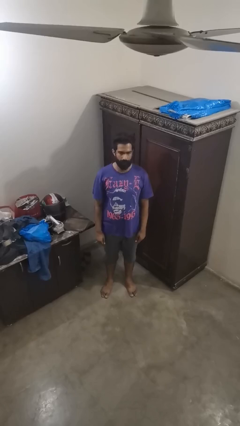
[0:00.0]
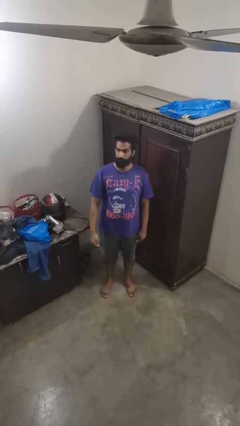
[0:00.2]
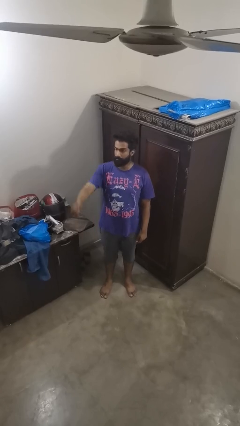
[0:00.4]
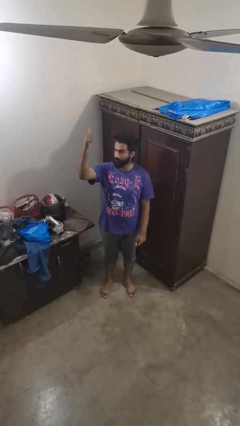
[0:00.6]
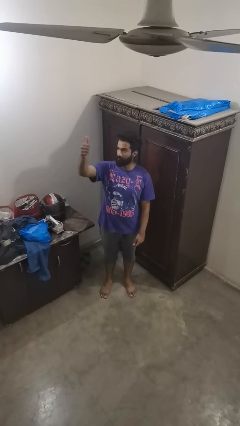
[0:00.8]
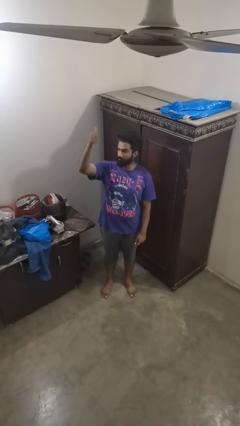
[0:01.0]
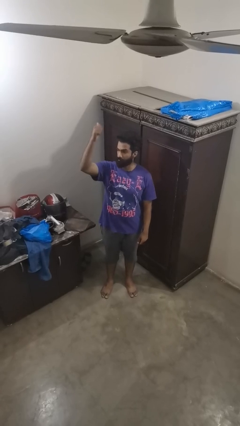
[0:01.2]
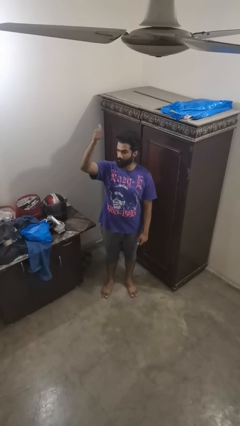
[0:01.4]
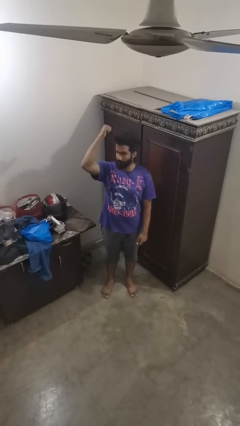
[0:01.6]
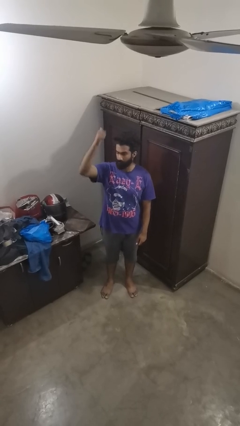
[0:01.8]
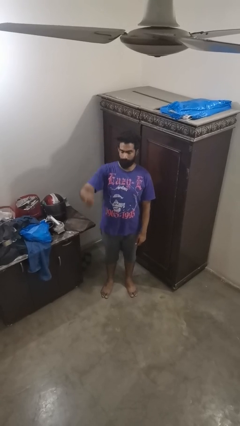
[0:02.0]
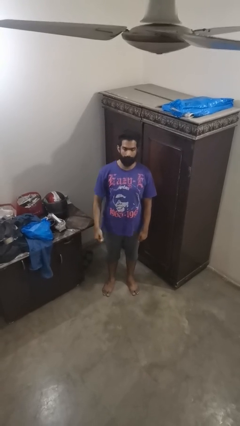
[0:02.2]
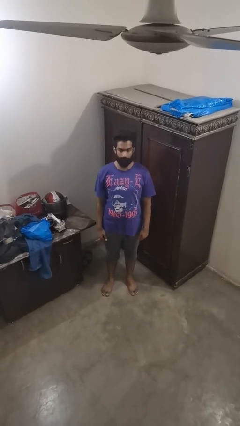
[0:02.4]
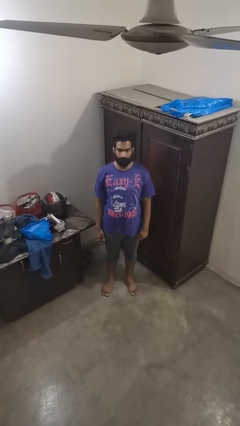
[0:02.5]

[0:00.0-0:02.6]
person gestures behind me

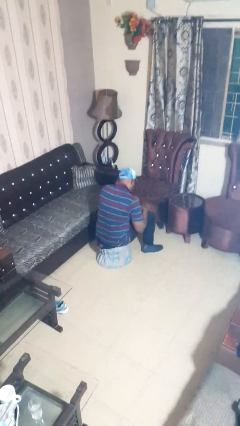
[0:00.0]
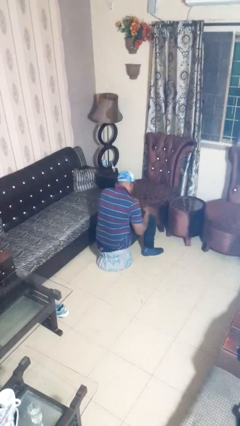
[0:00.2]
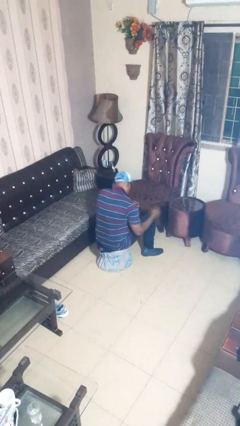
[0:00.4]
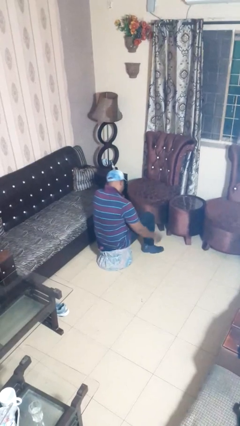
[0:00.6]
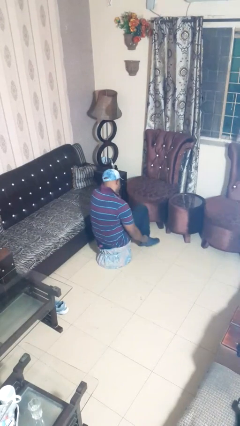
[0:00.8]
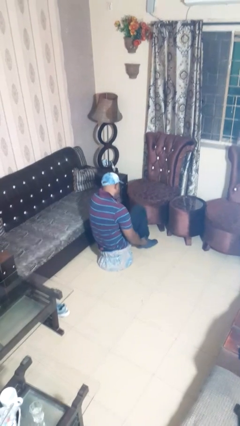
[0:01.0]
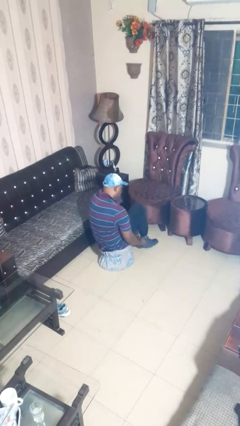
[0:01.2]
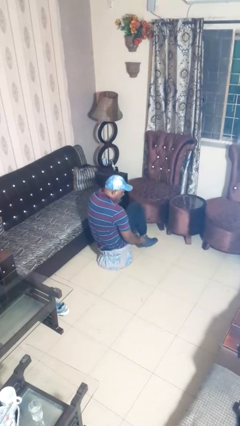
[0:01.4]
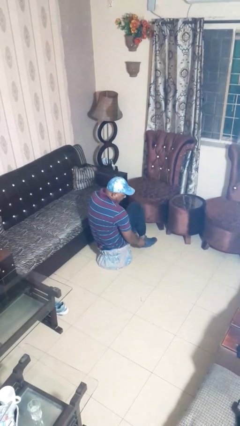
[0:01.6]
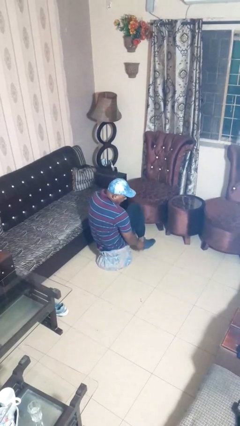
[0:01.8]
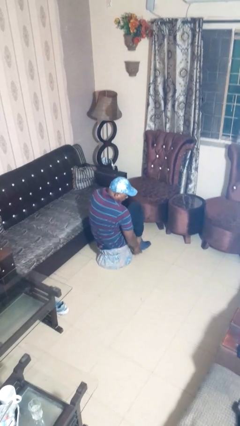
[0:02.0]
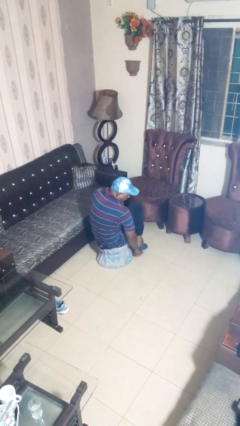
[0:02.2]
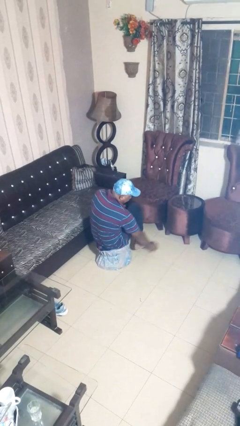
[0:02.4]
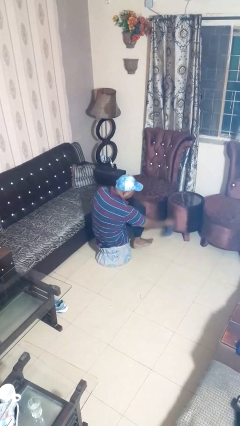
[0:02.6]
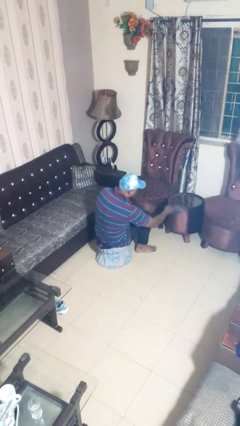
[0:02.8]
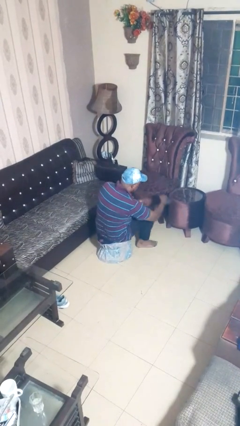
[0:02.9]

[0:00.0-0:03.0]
person takes off socks

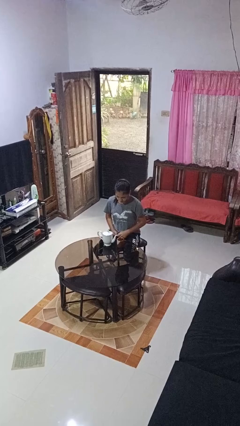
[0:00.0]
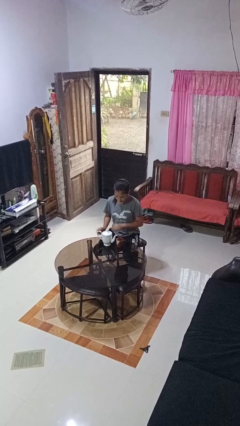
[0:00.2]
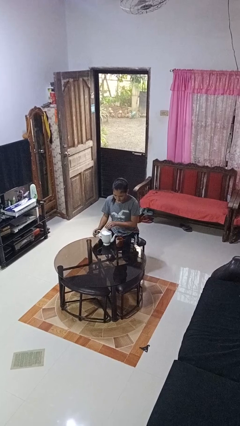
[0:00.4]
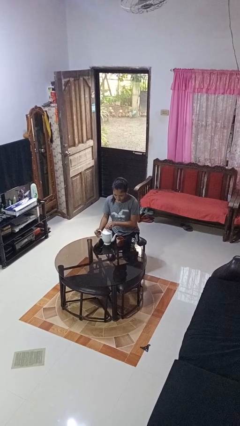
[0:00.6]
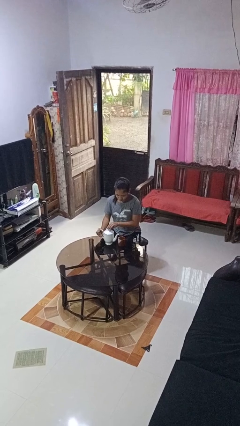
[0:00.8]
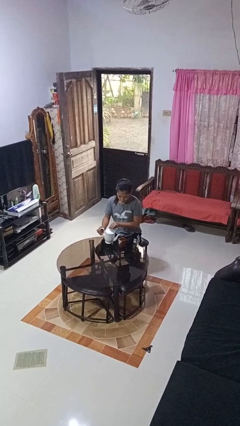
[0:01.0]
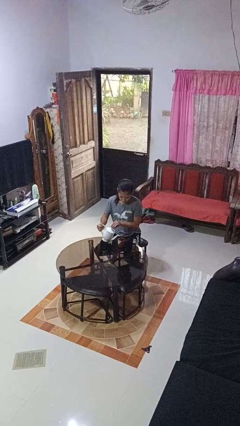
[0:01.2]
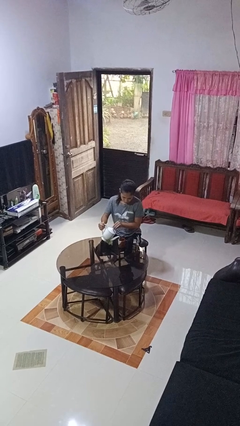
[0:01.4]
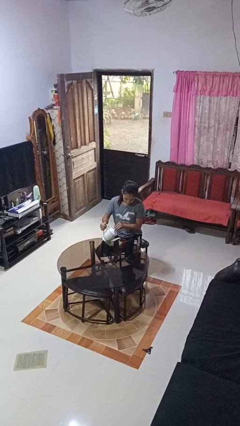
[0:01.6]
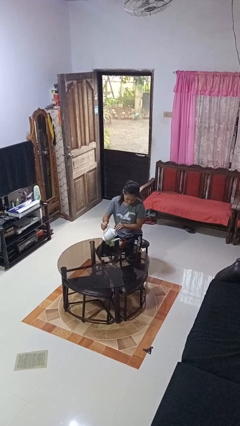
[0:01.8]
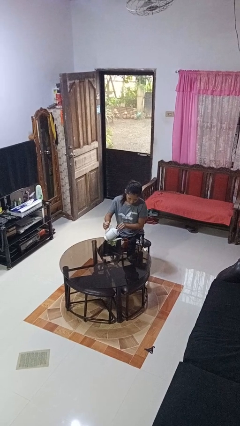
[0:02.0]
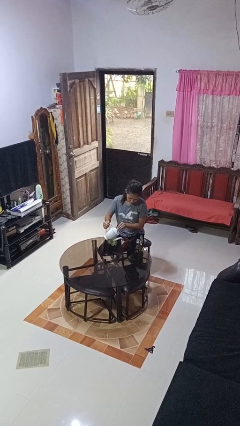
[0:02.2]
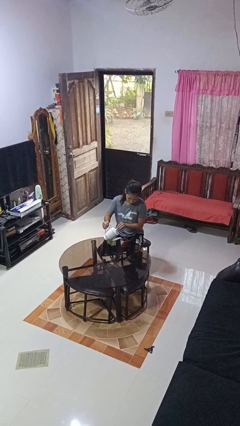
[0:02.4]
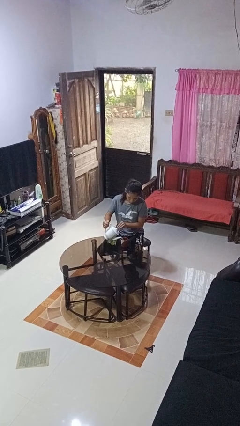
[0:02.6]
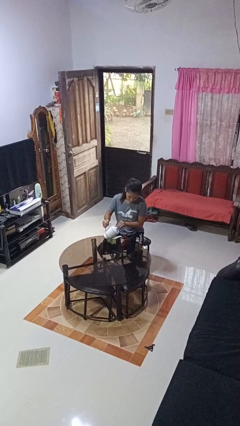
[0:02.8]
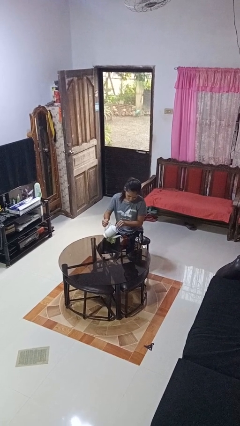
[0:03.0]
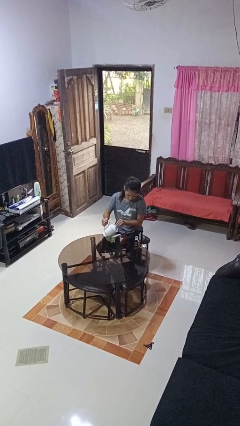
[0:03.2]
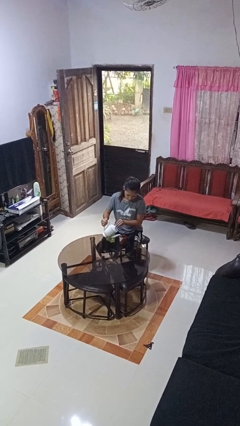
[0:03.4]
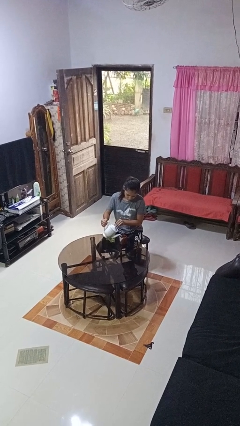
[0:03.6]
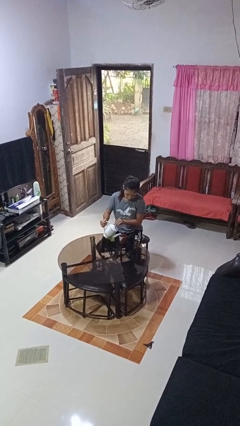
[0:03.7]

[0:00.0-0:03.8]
person pours coffee into mug

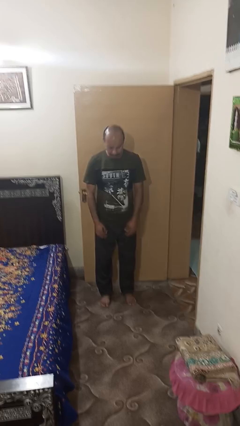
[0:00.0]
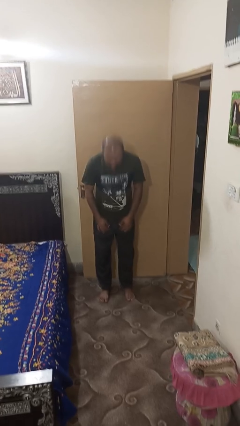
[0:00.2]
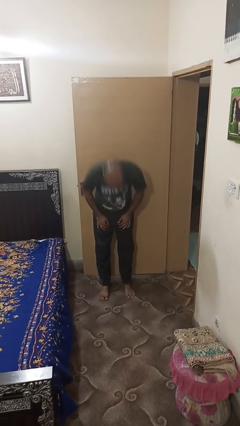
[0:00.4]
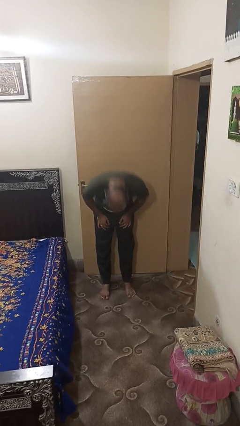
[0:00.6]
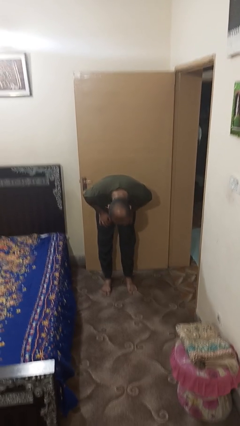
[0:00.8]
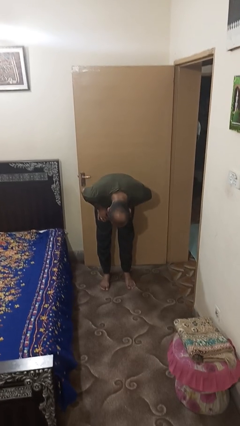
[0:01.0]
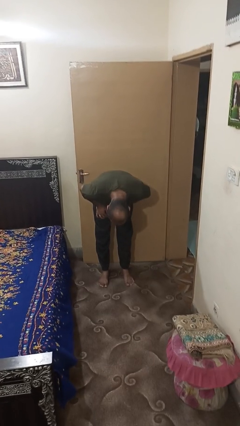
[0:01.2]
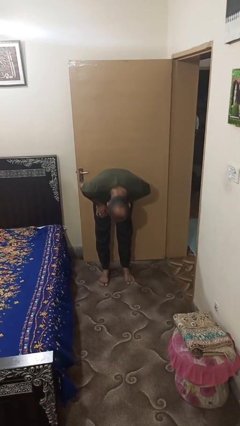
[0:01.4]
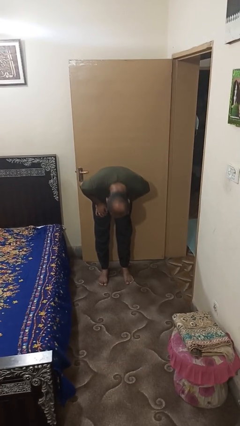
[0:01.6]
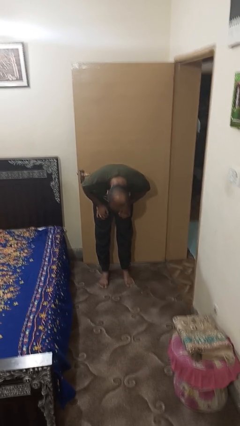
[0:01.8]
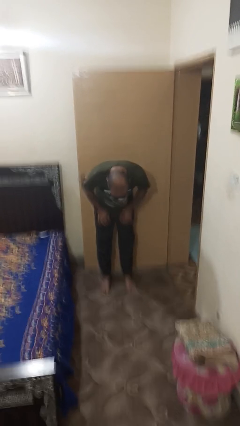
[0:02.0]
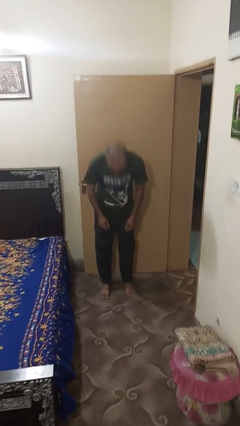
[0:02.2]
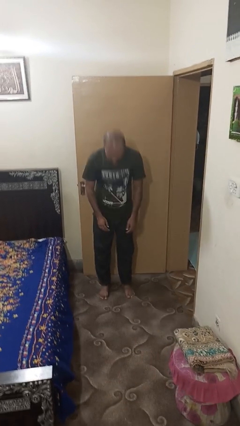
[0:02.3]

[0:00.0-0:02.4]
person bows

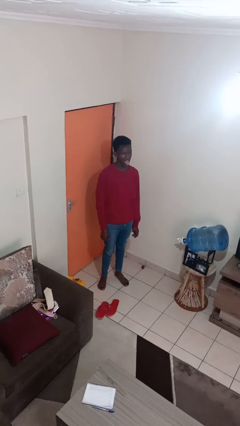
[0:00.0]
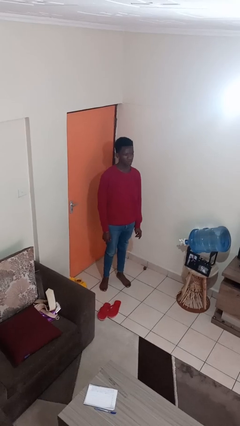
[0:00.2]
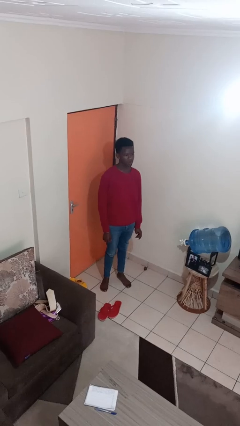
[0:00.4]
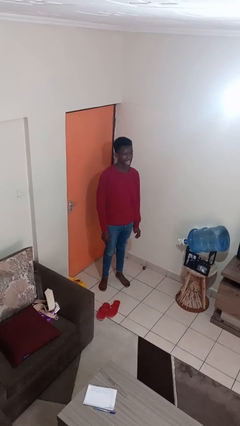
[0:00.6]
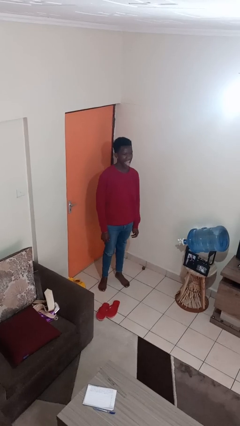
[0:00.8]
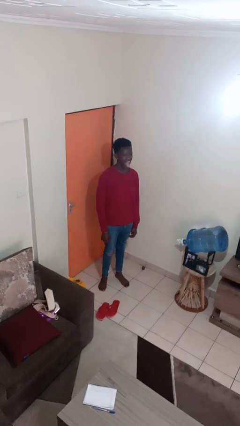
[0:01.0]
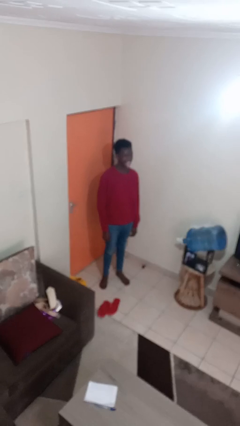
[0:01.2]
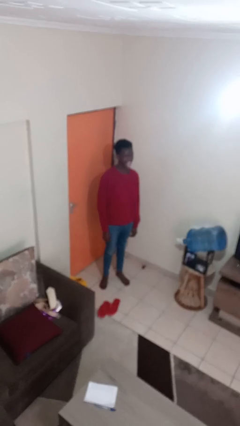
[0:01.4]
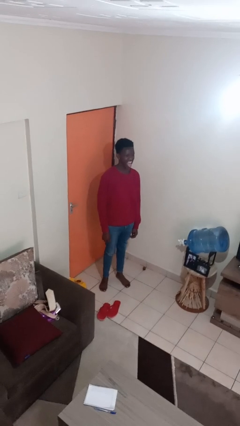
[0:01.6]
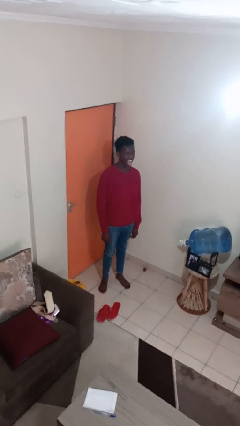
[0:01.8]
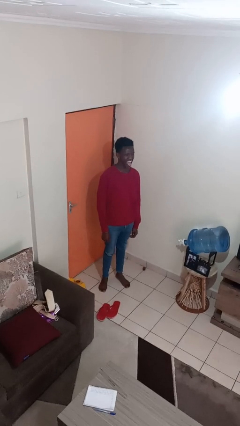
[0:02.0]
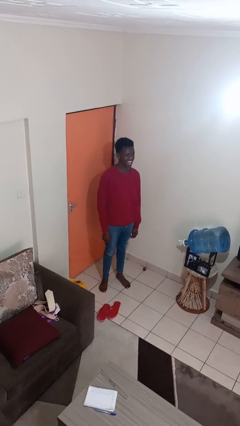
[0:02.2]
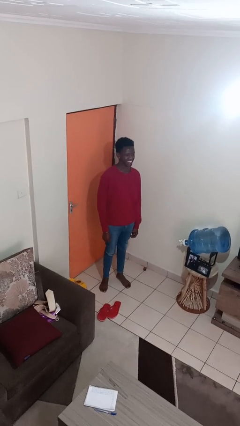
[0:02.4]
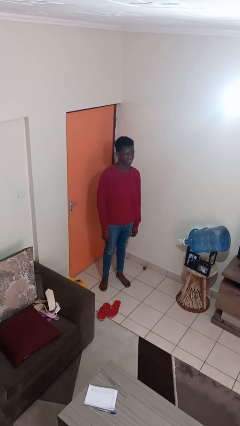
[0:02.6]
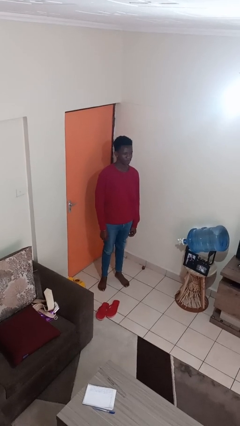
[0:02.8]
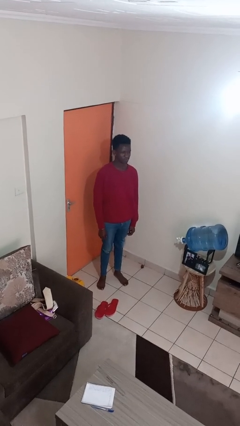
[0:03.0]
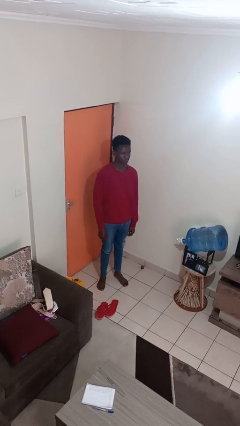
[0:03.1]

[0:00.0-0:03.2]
person sticks out tongue

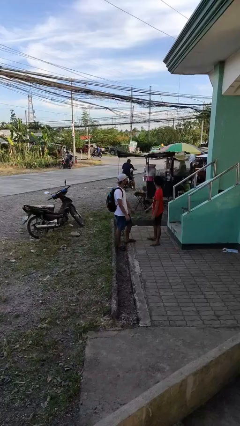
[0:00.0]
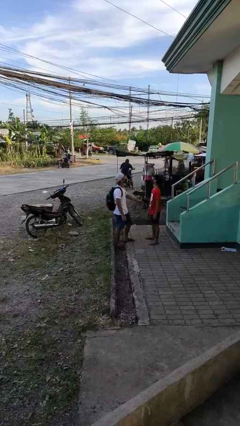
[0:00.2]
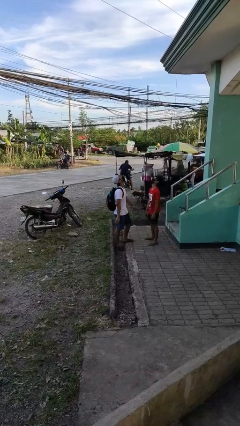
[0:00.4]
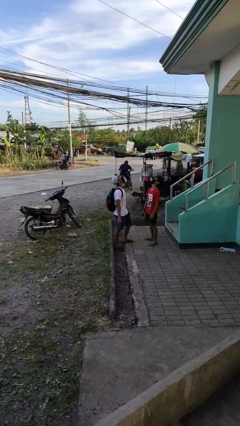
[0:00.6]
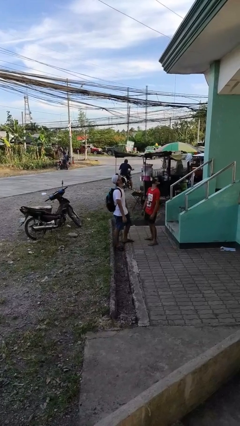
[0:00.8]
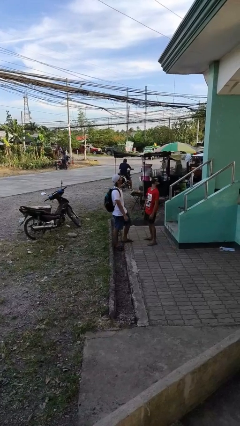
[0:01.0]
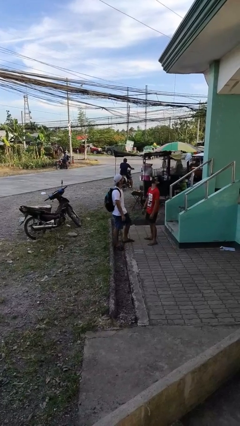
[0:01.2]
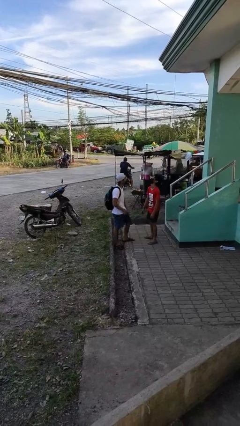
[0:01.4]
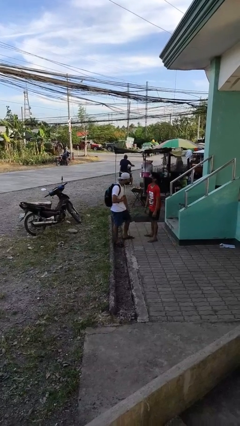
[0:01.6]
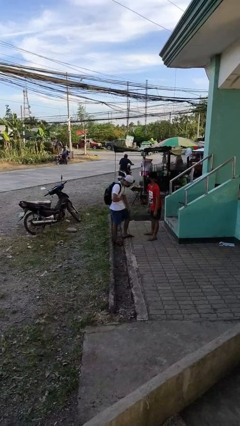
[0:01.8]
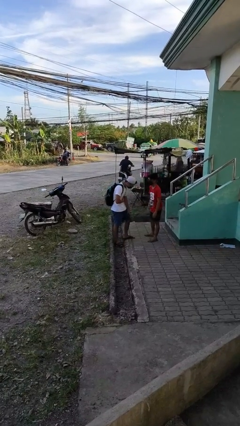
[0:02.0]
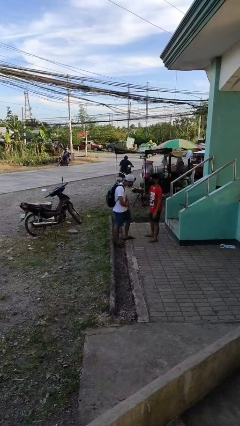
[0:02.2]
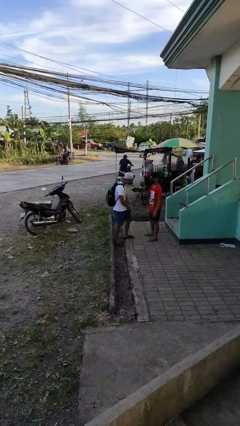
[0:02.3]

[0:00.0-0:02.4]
person laughs with person
